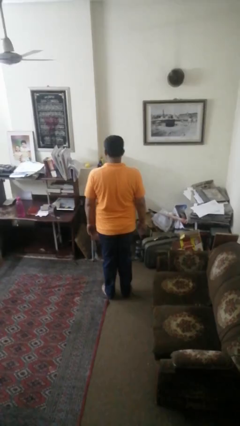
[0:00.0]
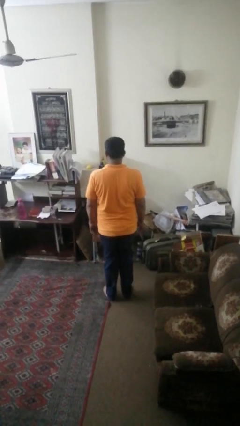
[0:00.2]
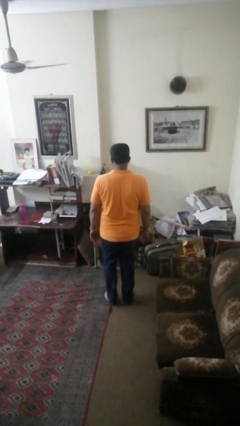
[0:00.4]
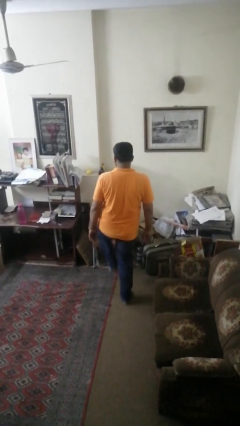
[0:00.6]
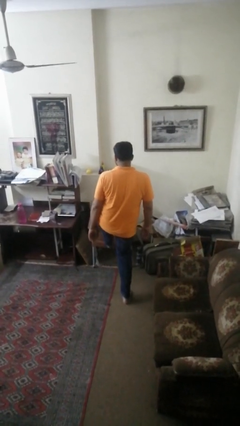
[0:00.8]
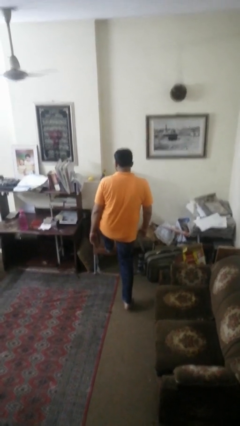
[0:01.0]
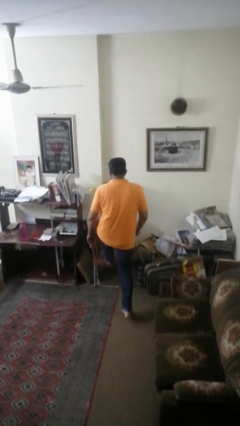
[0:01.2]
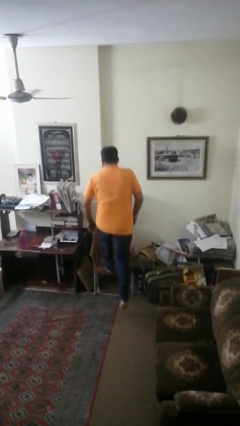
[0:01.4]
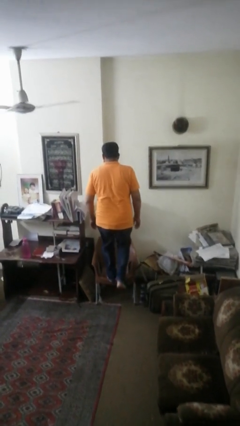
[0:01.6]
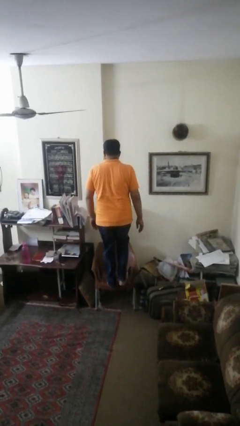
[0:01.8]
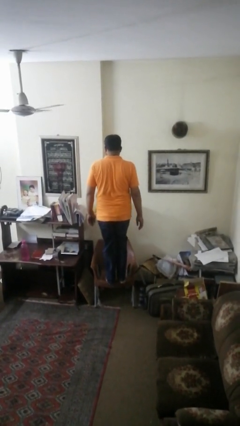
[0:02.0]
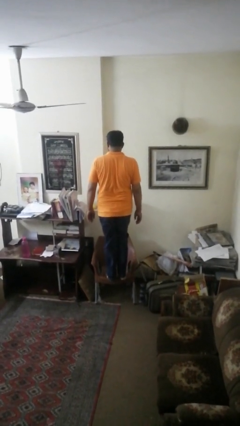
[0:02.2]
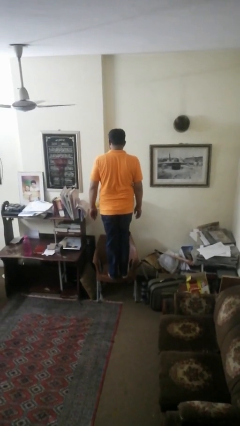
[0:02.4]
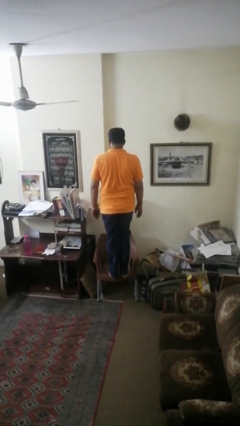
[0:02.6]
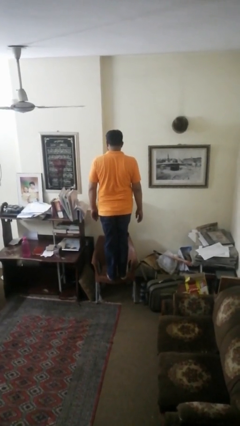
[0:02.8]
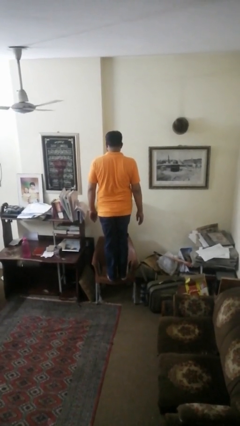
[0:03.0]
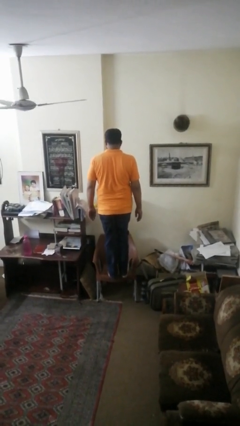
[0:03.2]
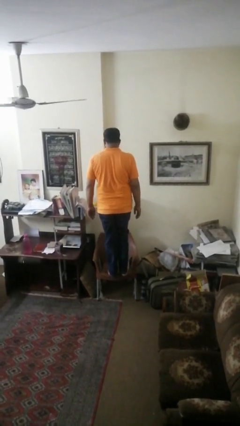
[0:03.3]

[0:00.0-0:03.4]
person climbs on chair

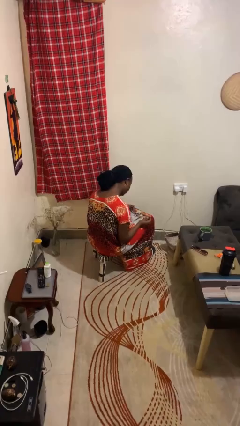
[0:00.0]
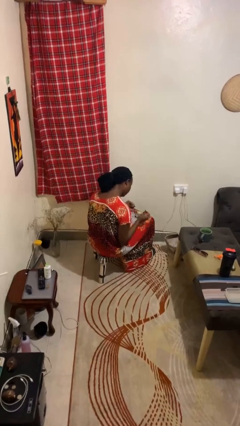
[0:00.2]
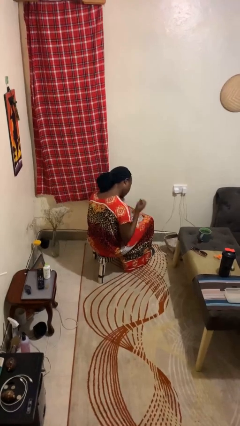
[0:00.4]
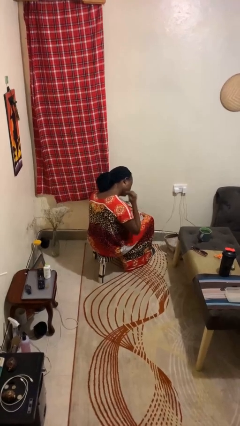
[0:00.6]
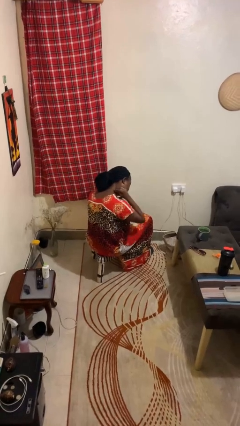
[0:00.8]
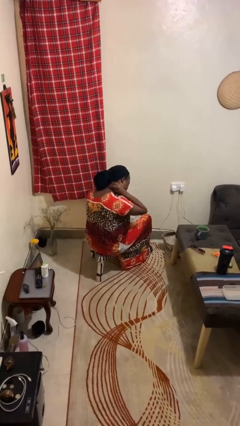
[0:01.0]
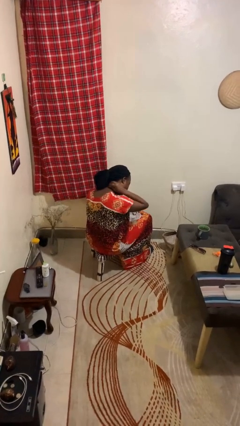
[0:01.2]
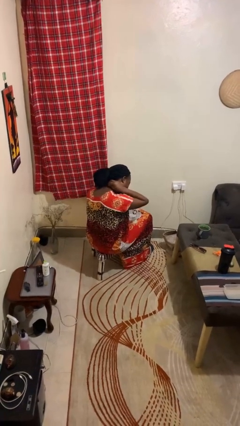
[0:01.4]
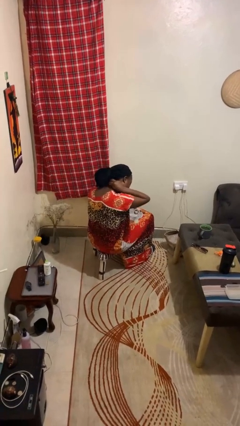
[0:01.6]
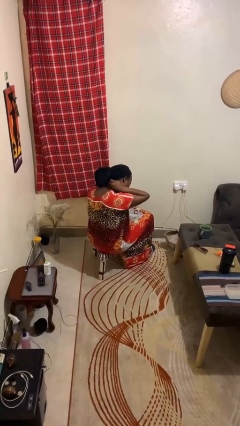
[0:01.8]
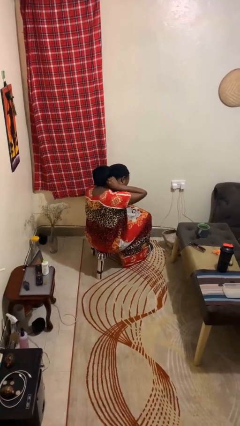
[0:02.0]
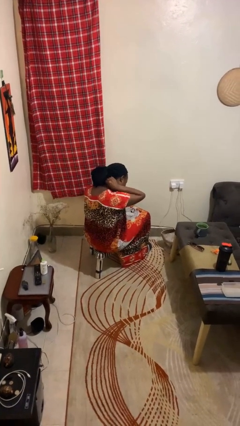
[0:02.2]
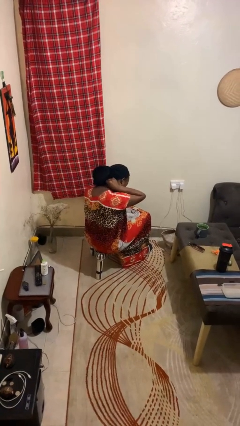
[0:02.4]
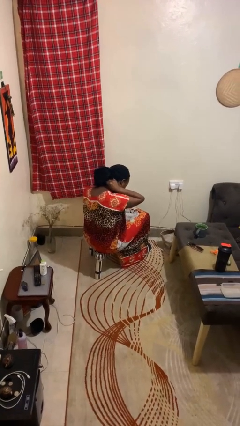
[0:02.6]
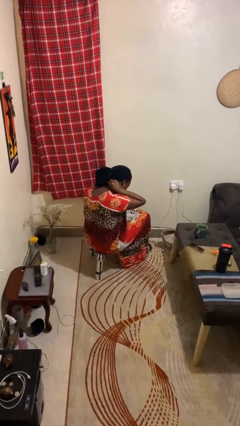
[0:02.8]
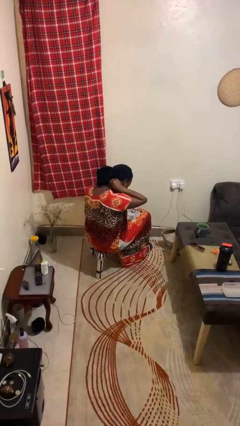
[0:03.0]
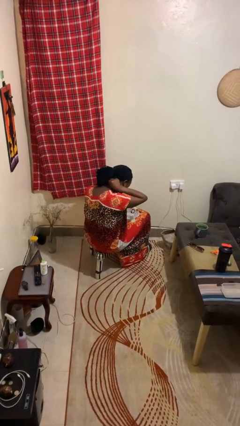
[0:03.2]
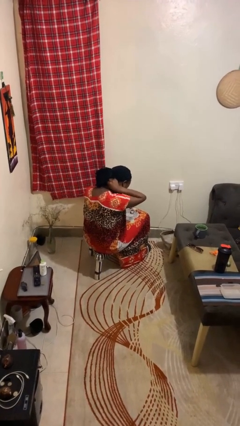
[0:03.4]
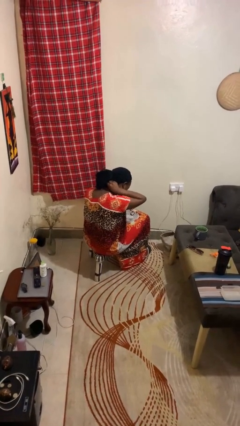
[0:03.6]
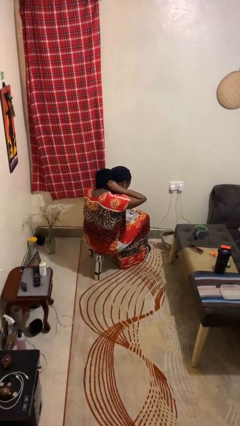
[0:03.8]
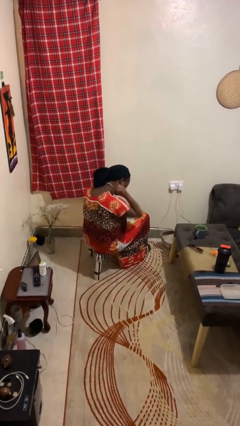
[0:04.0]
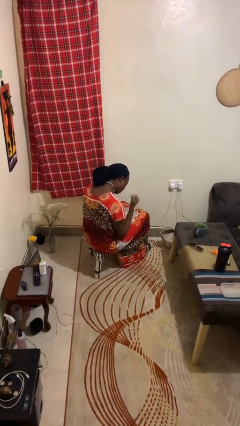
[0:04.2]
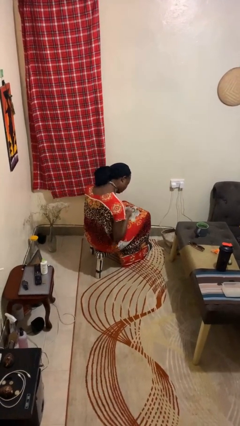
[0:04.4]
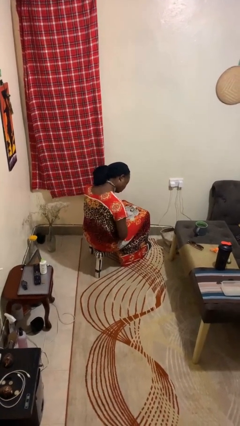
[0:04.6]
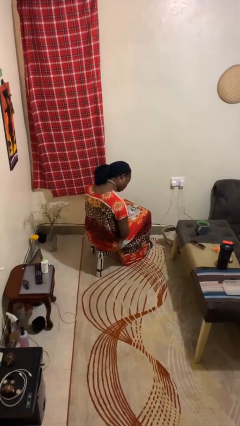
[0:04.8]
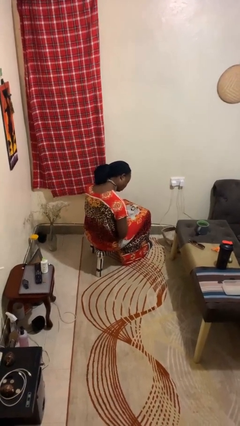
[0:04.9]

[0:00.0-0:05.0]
person puts on necklace

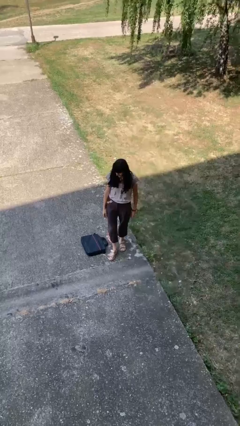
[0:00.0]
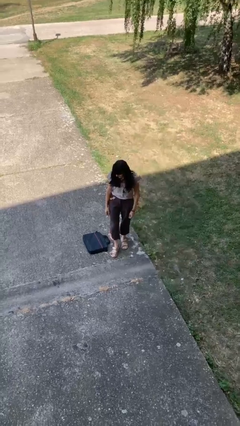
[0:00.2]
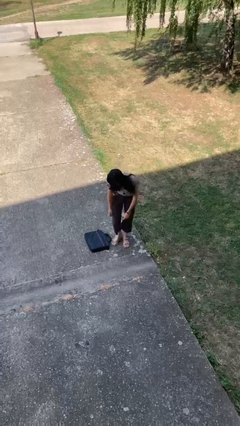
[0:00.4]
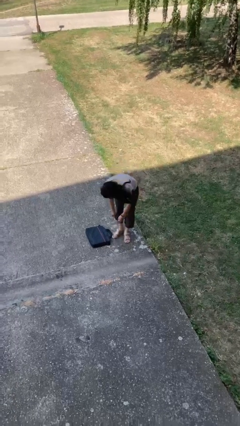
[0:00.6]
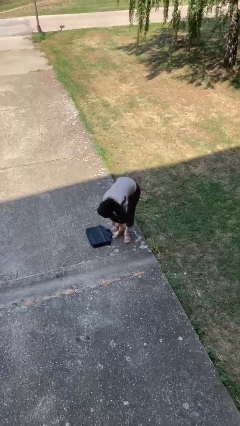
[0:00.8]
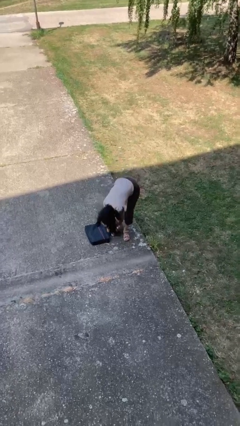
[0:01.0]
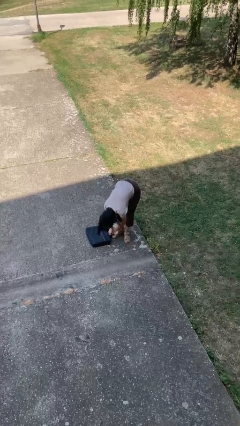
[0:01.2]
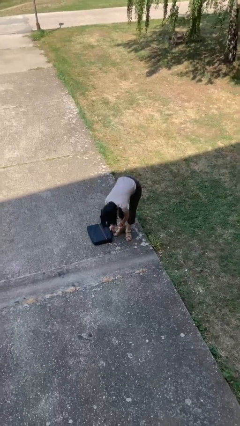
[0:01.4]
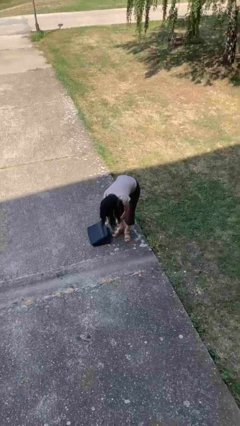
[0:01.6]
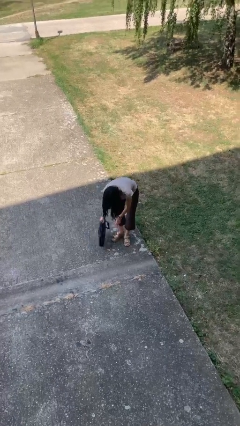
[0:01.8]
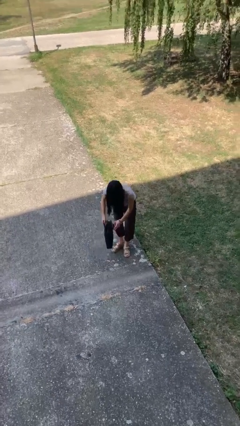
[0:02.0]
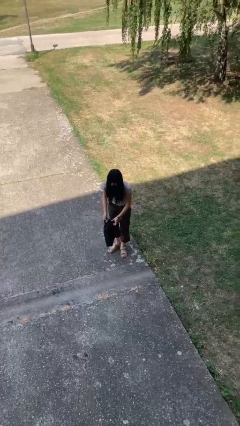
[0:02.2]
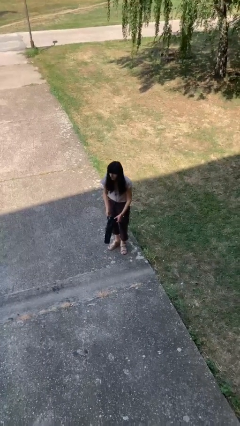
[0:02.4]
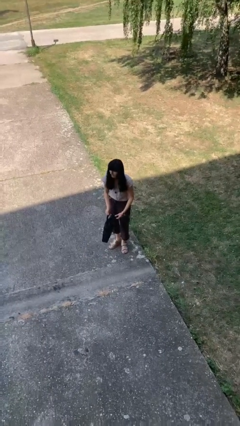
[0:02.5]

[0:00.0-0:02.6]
person picks up object from floor

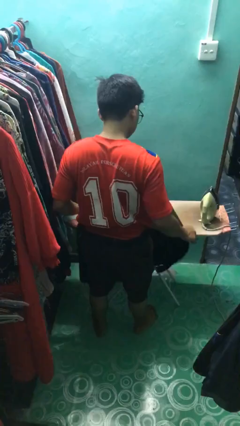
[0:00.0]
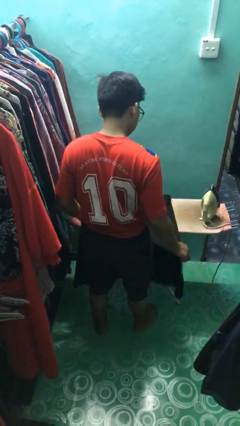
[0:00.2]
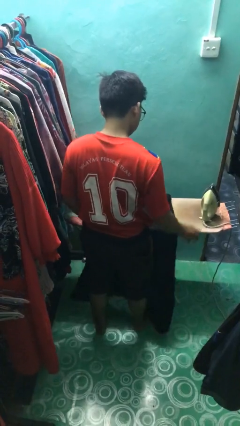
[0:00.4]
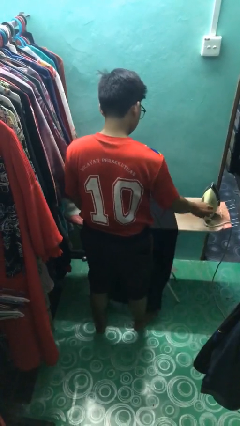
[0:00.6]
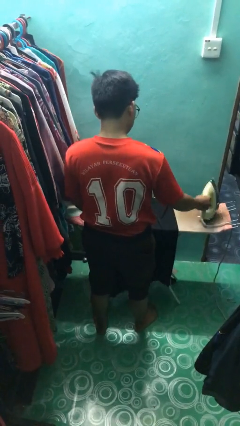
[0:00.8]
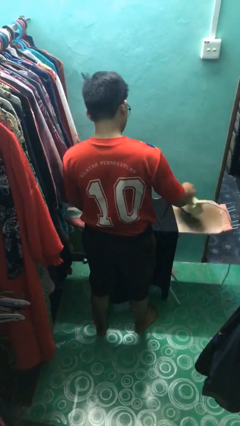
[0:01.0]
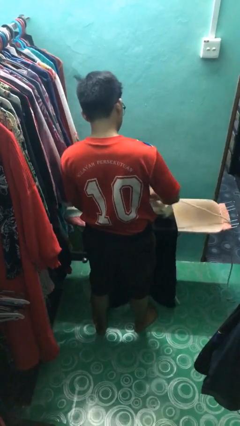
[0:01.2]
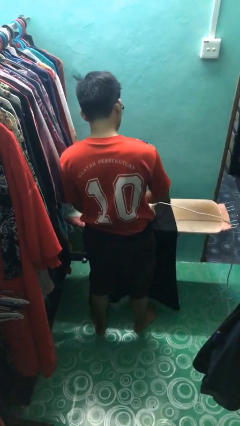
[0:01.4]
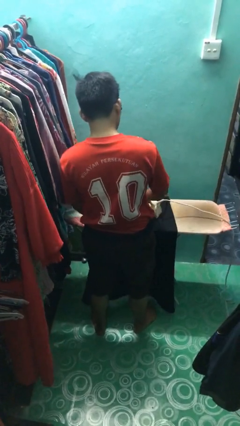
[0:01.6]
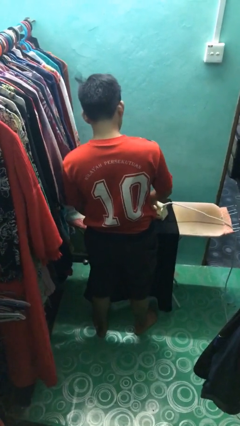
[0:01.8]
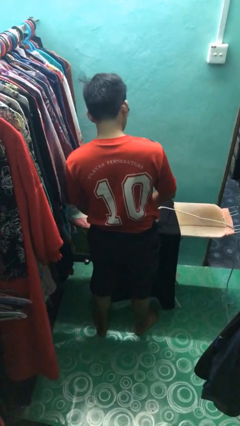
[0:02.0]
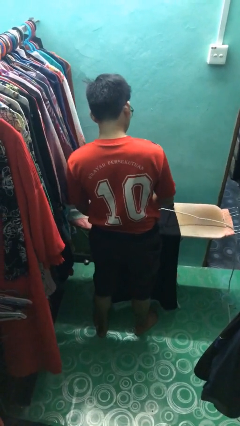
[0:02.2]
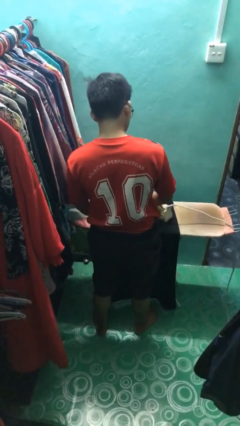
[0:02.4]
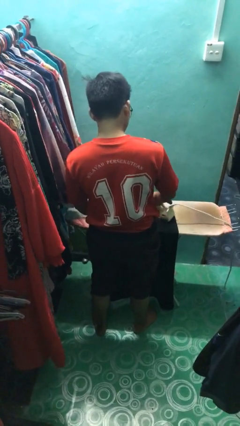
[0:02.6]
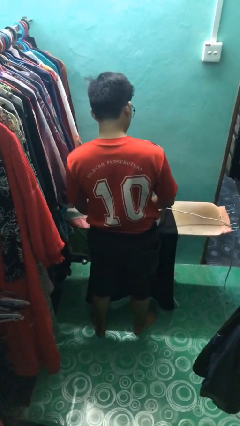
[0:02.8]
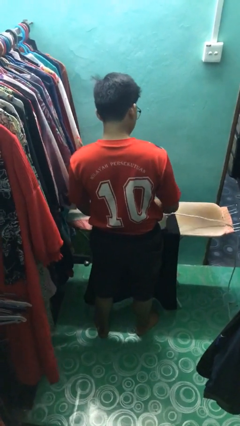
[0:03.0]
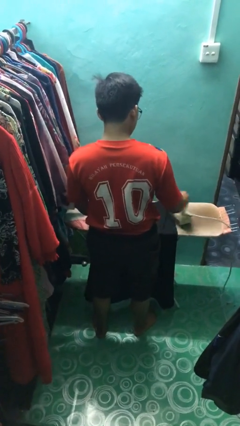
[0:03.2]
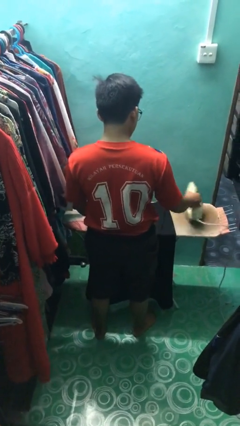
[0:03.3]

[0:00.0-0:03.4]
person irons clothes

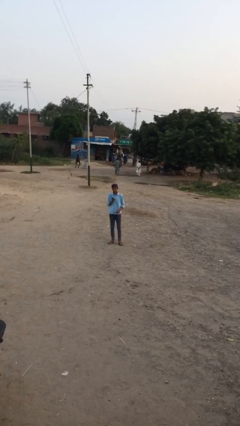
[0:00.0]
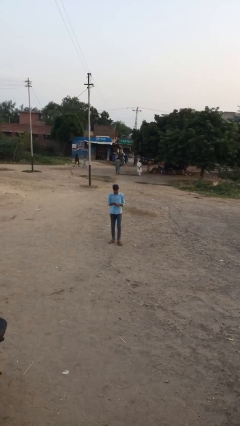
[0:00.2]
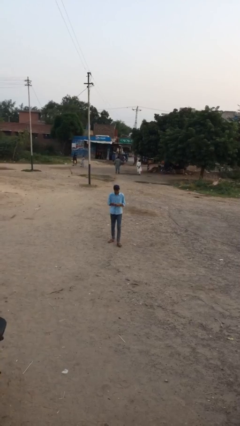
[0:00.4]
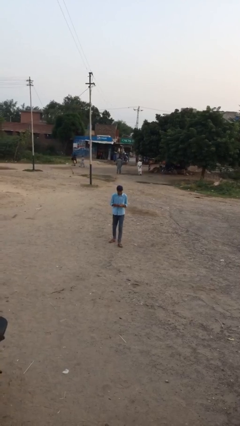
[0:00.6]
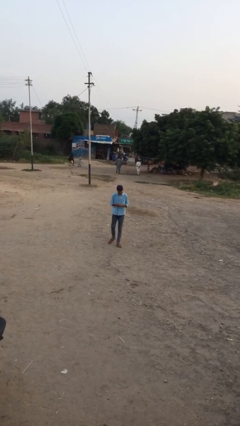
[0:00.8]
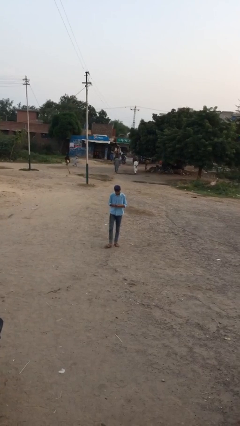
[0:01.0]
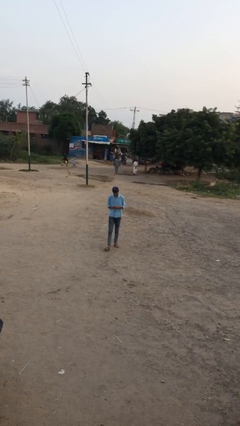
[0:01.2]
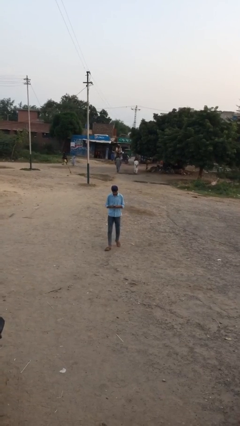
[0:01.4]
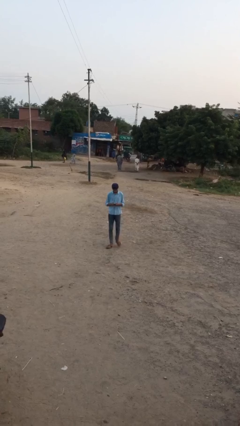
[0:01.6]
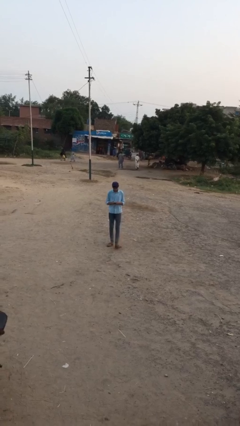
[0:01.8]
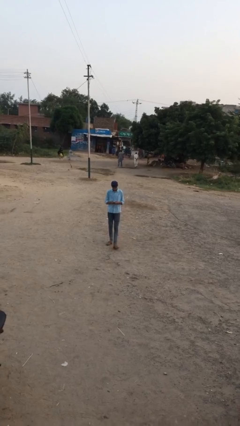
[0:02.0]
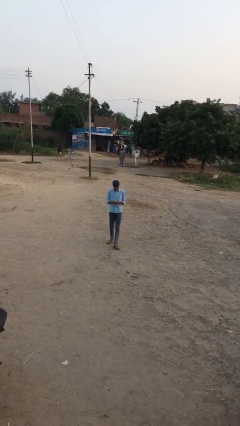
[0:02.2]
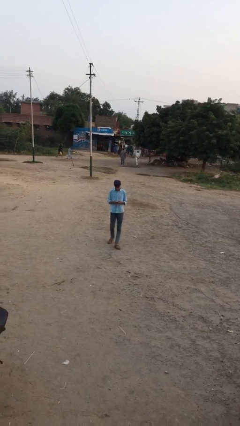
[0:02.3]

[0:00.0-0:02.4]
person texts on phone

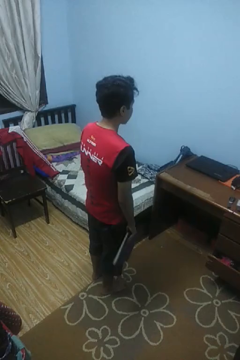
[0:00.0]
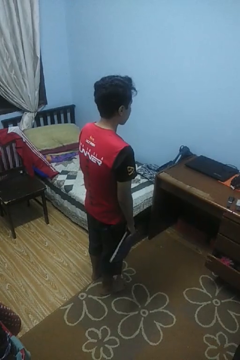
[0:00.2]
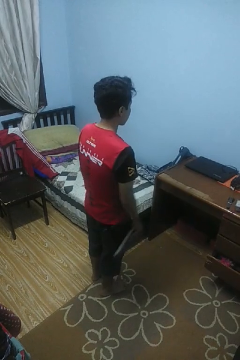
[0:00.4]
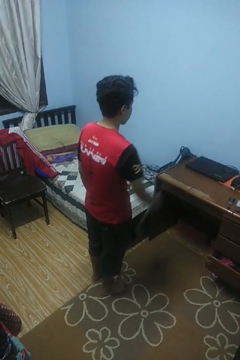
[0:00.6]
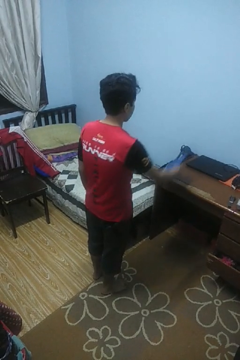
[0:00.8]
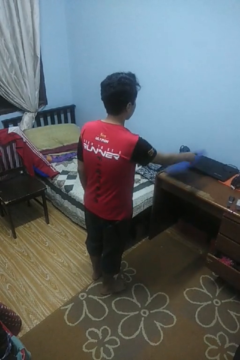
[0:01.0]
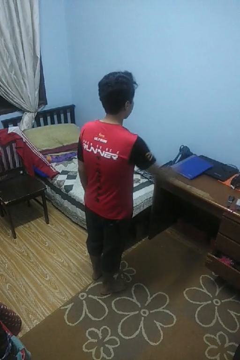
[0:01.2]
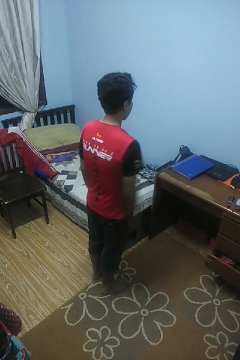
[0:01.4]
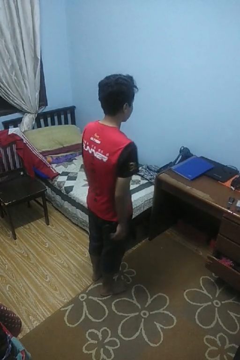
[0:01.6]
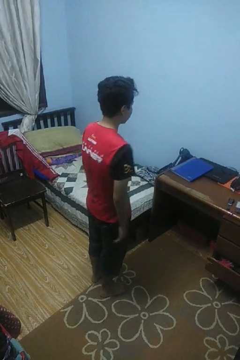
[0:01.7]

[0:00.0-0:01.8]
person throws object on table
